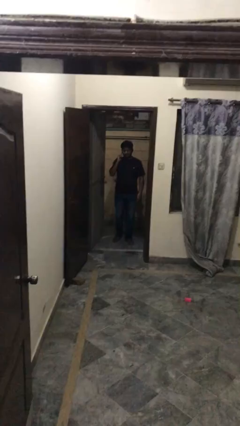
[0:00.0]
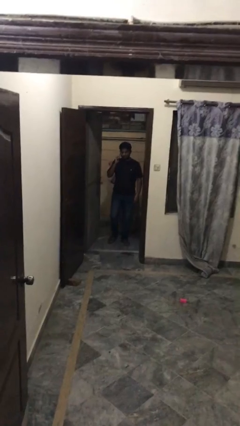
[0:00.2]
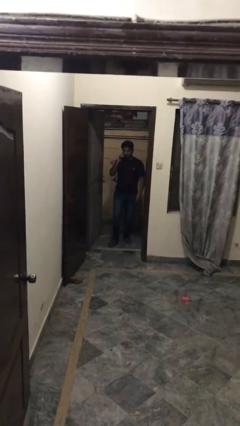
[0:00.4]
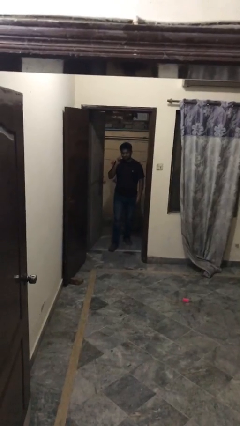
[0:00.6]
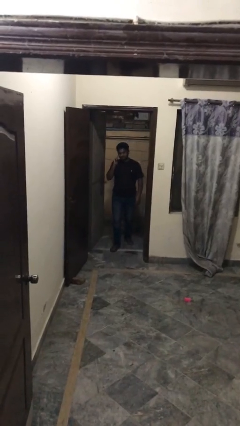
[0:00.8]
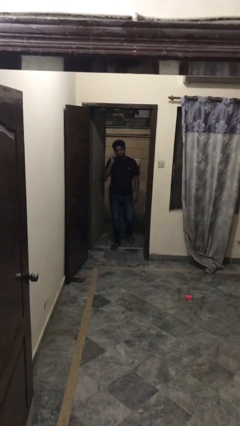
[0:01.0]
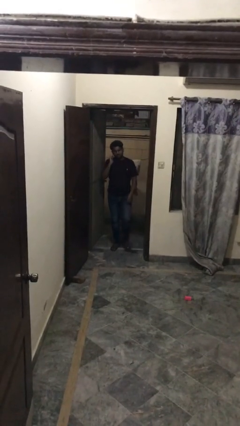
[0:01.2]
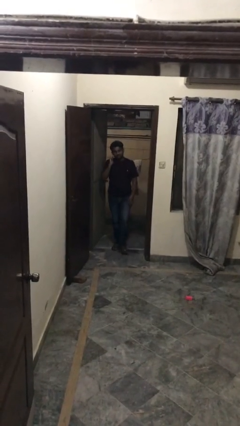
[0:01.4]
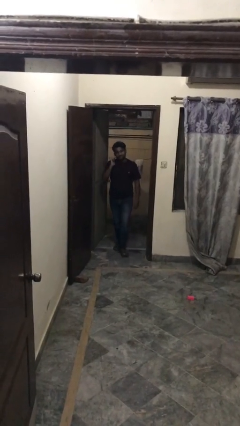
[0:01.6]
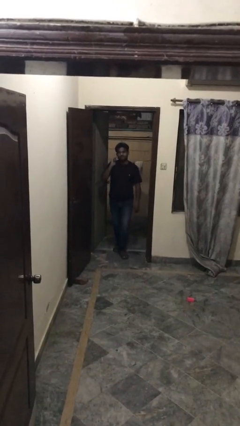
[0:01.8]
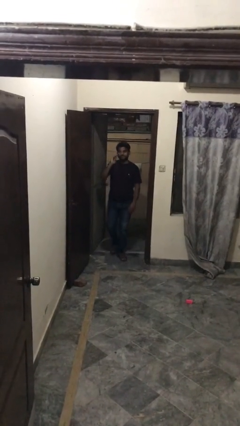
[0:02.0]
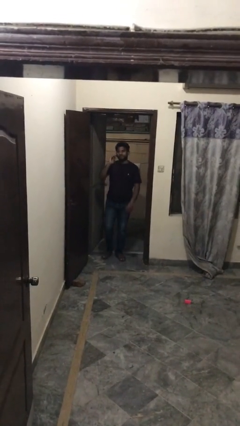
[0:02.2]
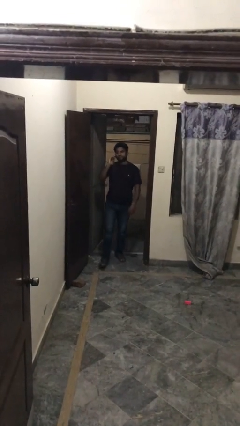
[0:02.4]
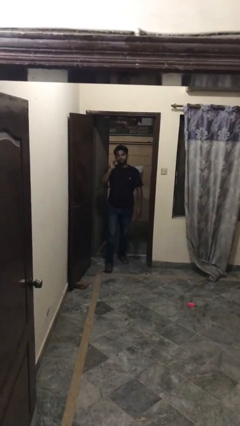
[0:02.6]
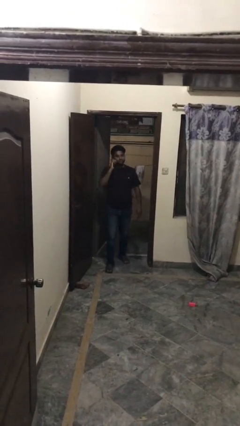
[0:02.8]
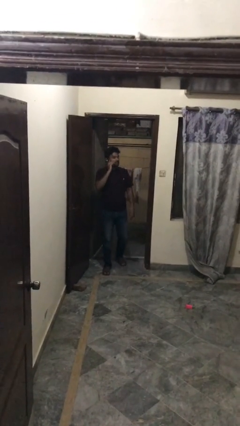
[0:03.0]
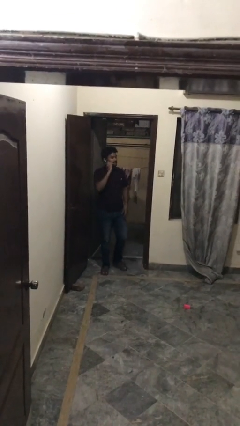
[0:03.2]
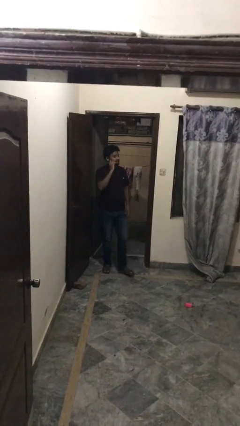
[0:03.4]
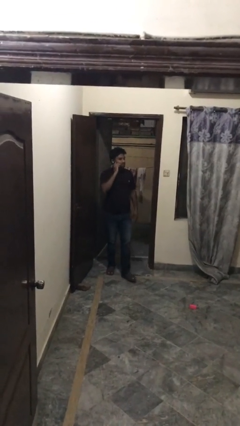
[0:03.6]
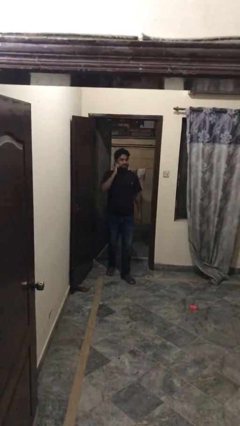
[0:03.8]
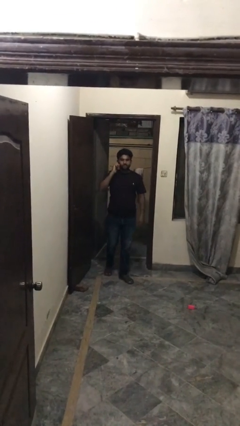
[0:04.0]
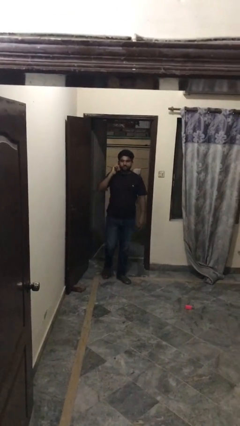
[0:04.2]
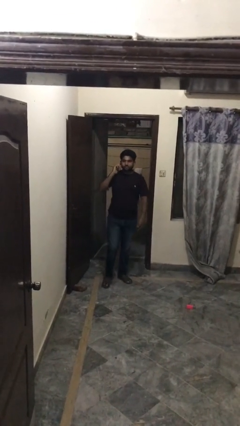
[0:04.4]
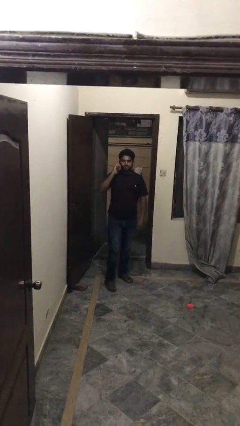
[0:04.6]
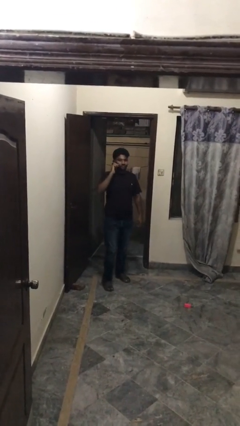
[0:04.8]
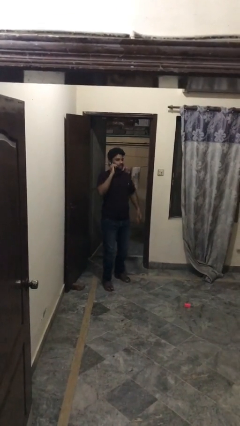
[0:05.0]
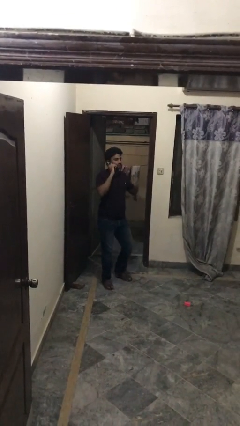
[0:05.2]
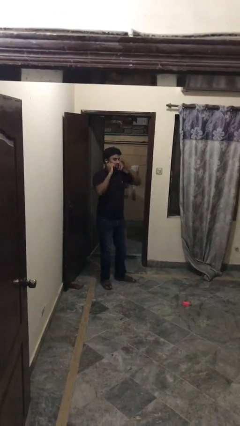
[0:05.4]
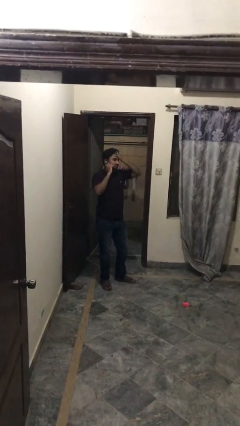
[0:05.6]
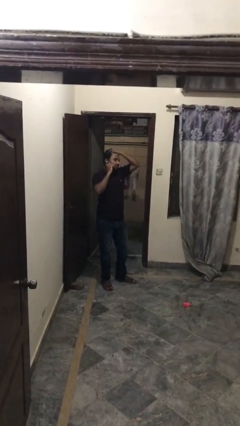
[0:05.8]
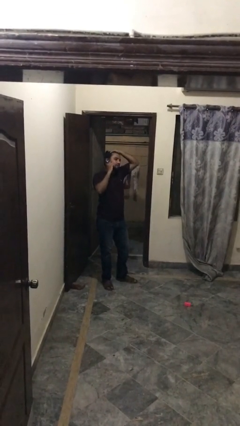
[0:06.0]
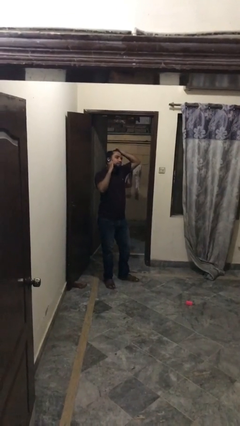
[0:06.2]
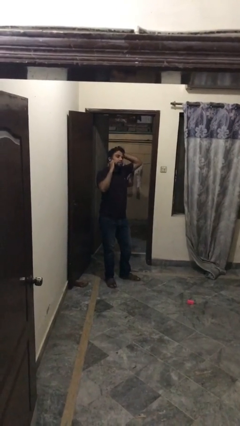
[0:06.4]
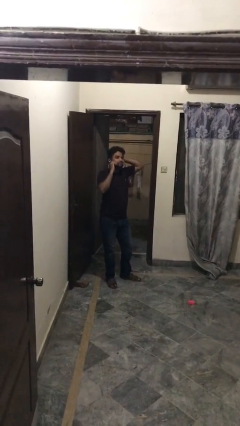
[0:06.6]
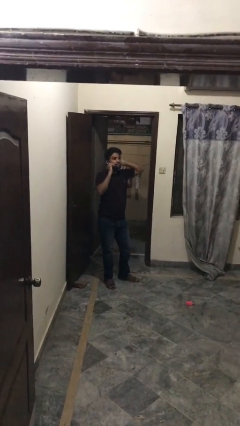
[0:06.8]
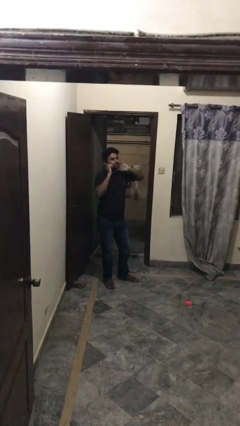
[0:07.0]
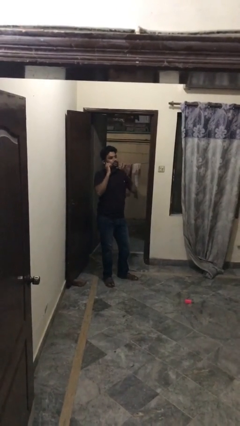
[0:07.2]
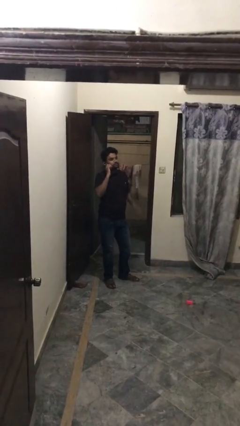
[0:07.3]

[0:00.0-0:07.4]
person enters scene through structure

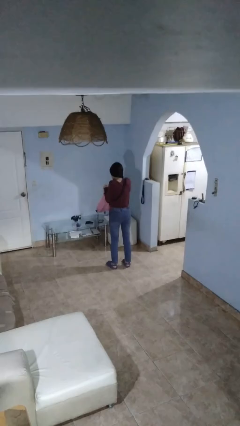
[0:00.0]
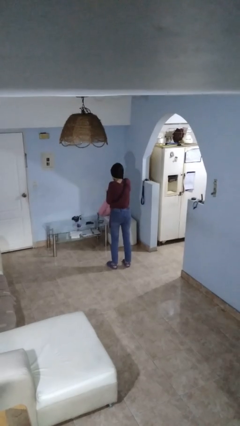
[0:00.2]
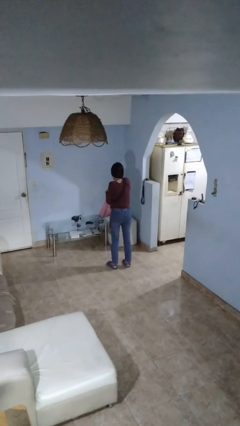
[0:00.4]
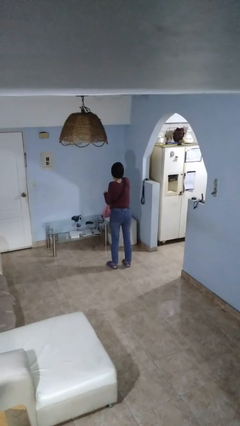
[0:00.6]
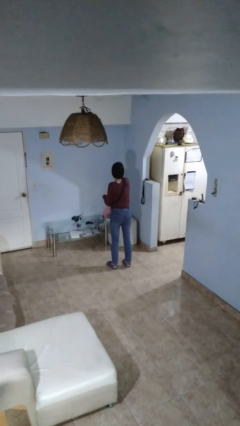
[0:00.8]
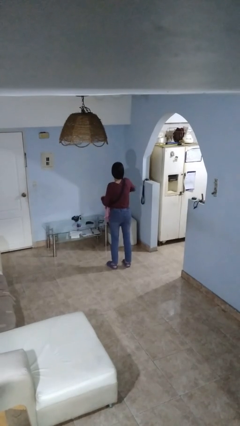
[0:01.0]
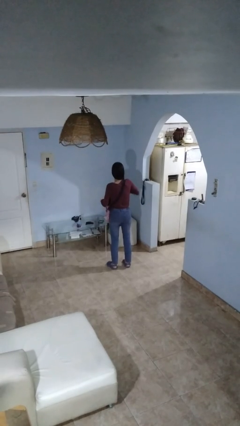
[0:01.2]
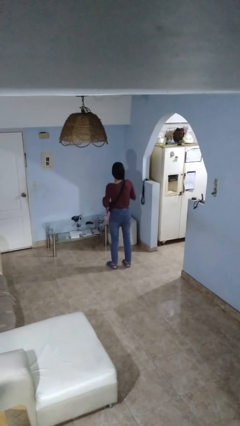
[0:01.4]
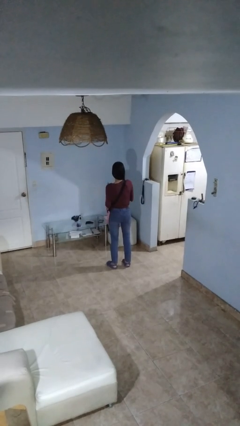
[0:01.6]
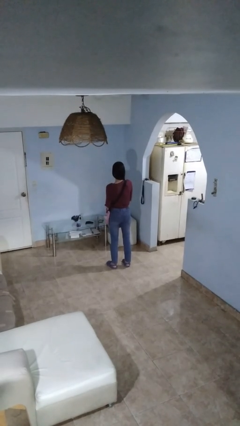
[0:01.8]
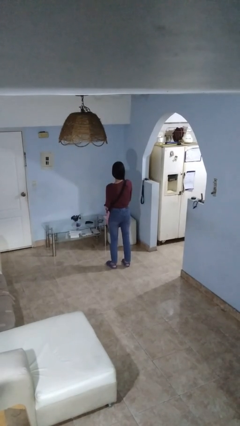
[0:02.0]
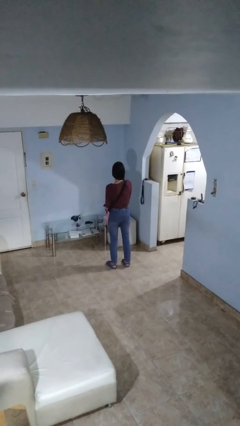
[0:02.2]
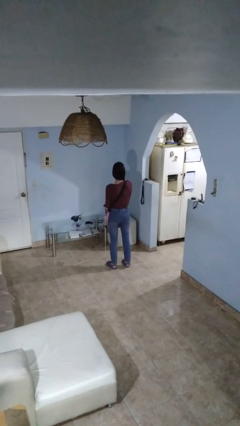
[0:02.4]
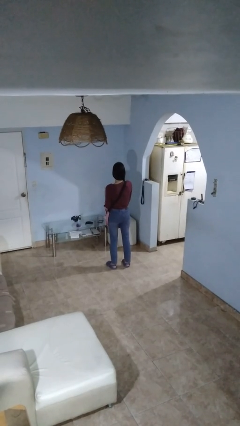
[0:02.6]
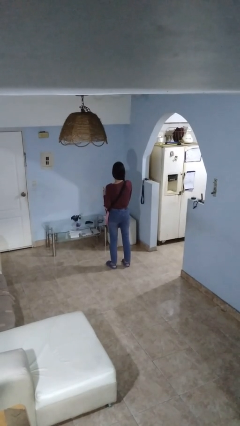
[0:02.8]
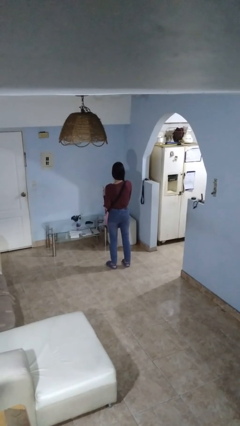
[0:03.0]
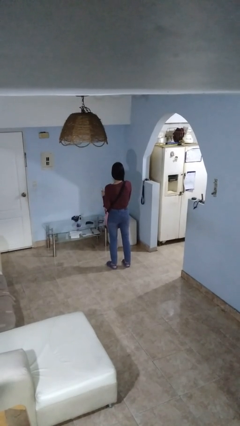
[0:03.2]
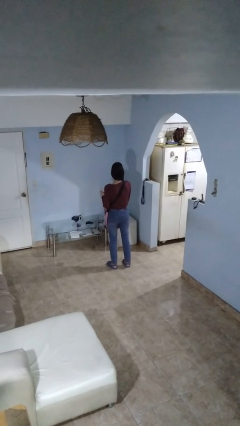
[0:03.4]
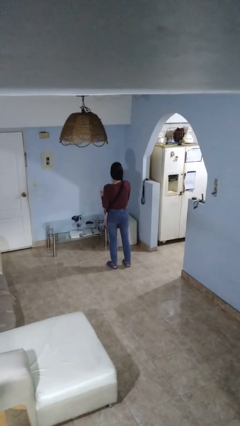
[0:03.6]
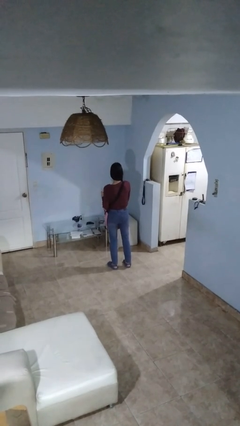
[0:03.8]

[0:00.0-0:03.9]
person takes object from backpack

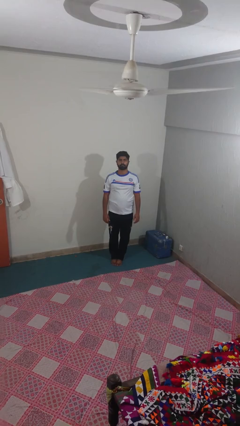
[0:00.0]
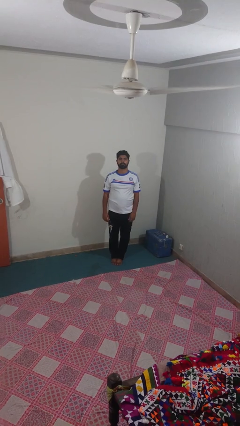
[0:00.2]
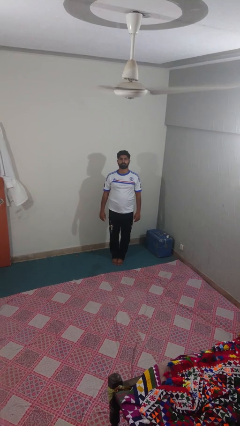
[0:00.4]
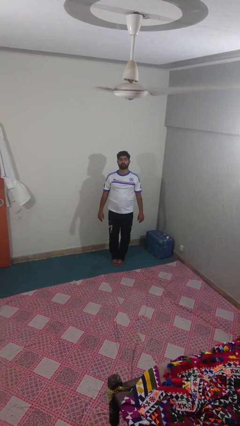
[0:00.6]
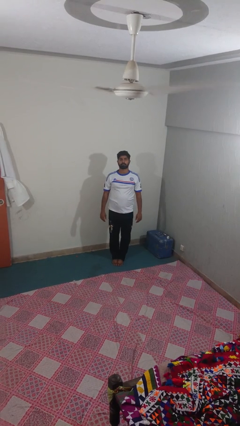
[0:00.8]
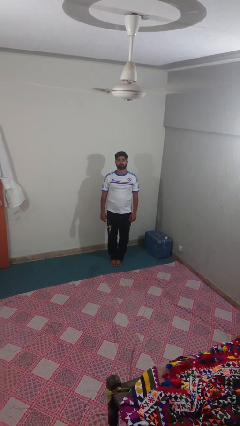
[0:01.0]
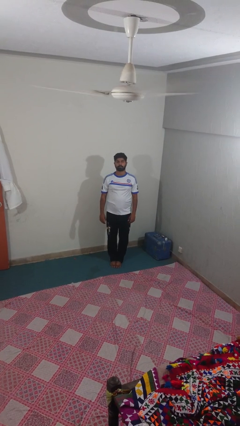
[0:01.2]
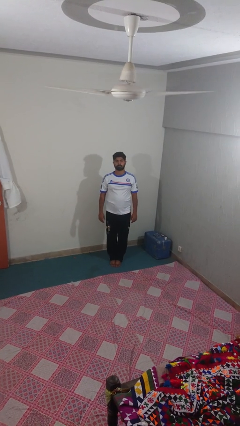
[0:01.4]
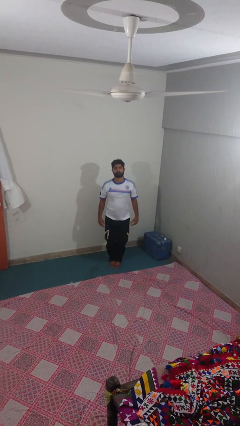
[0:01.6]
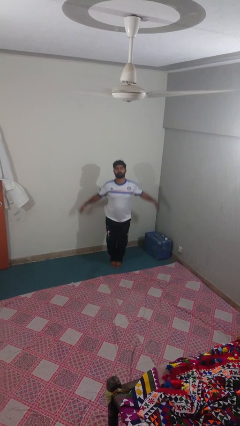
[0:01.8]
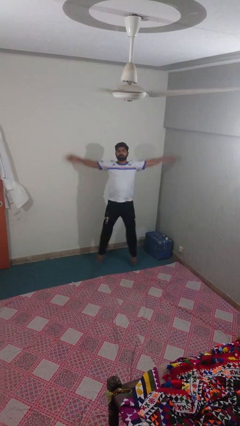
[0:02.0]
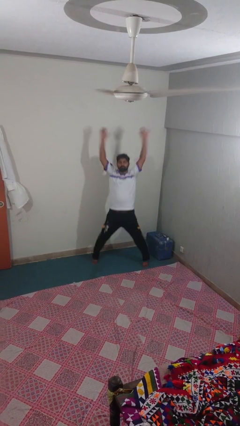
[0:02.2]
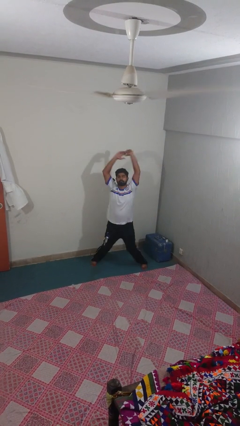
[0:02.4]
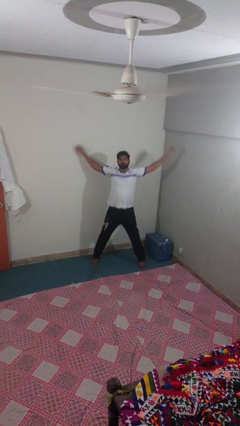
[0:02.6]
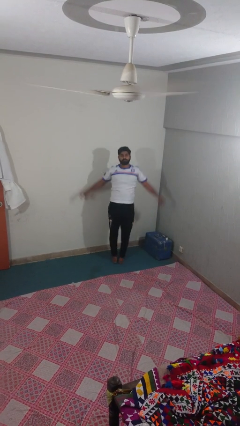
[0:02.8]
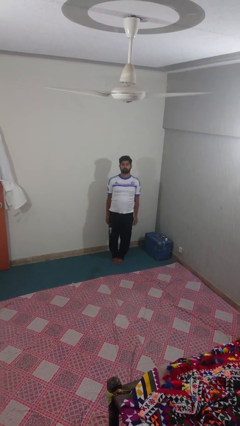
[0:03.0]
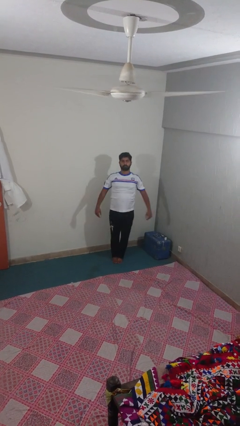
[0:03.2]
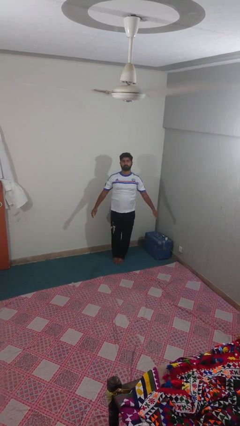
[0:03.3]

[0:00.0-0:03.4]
person exercises with jumping jacks

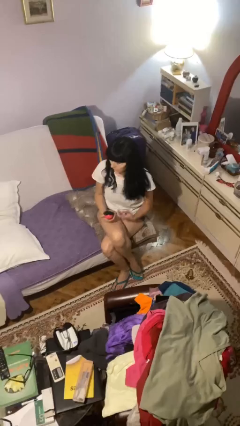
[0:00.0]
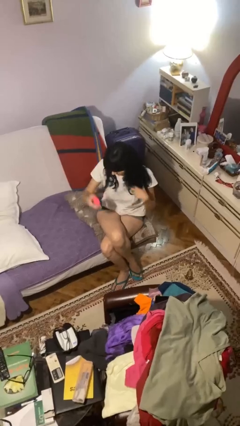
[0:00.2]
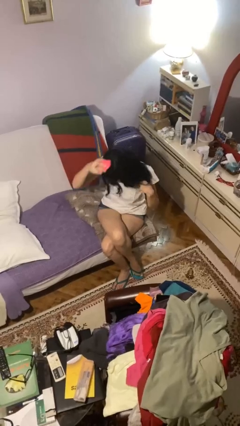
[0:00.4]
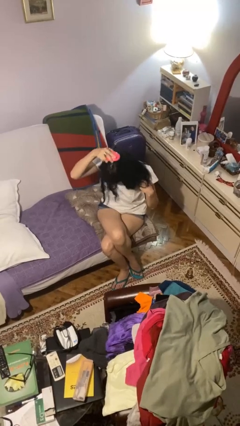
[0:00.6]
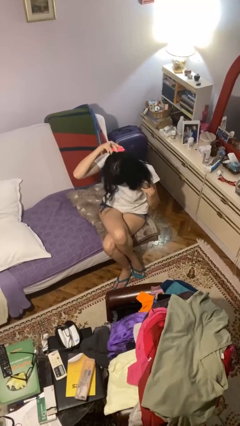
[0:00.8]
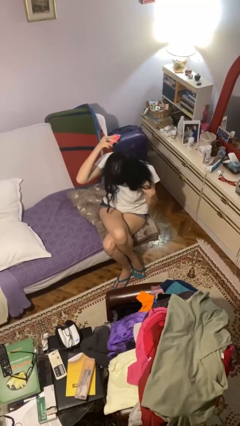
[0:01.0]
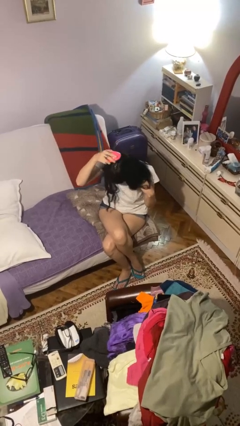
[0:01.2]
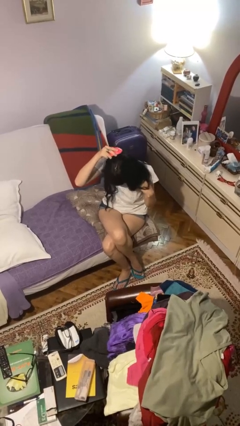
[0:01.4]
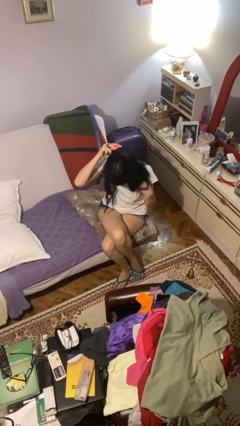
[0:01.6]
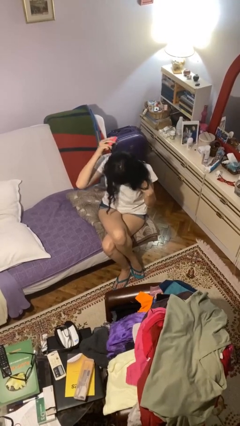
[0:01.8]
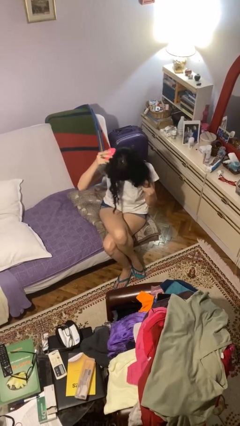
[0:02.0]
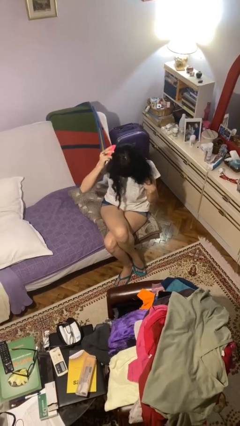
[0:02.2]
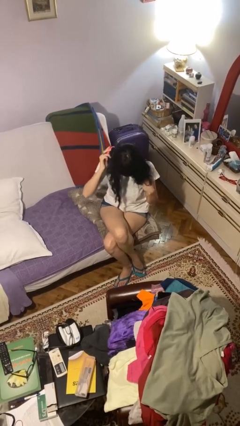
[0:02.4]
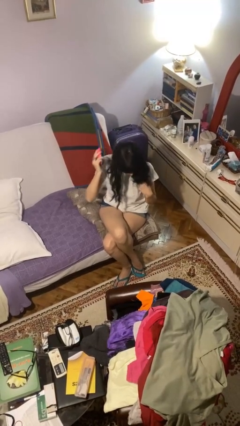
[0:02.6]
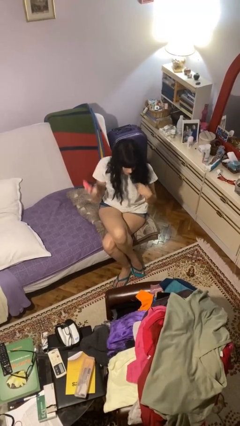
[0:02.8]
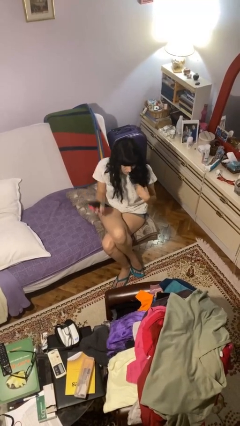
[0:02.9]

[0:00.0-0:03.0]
person brushes hair
